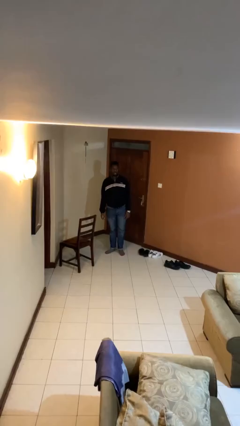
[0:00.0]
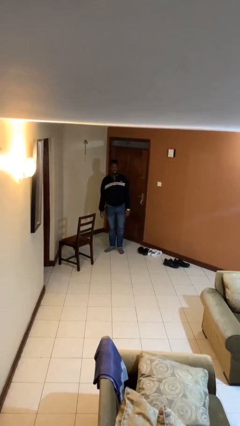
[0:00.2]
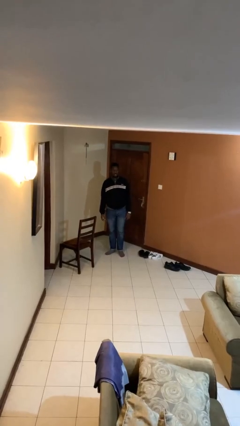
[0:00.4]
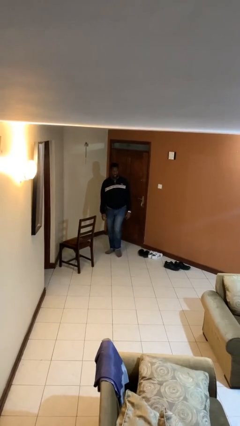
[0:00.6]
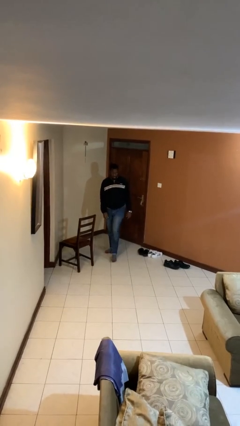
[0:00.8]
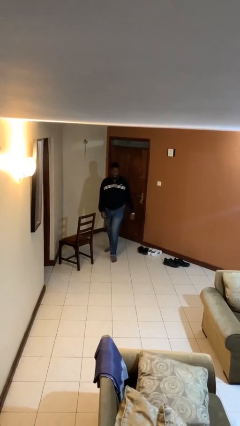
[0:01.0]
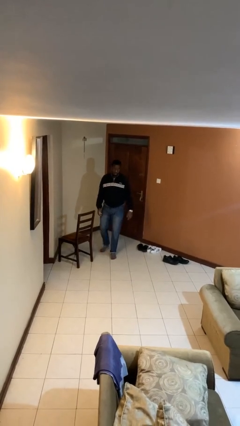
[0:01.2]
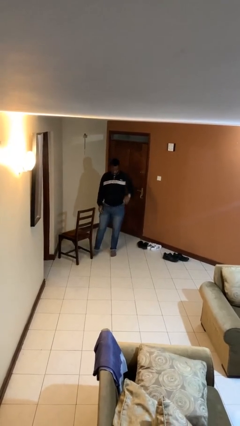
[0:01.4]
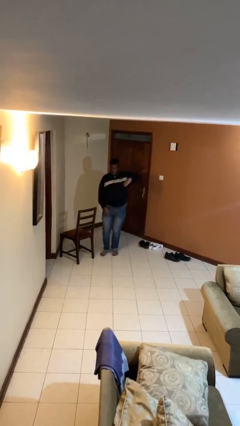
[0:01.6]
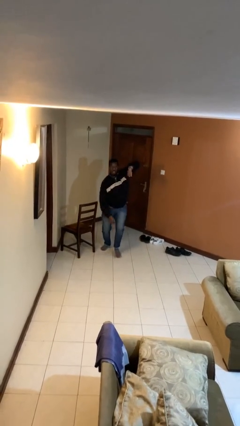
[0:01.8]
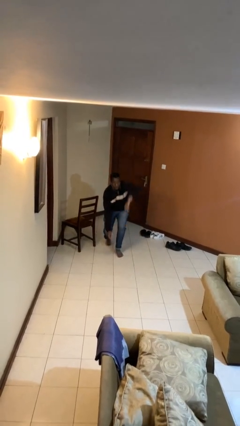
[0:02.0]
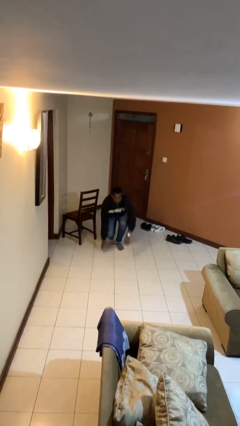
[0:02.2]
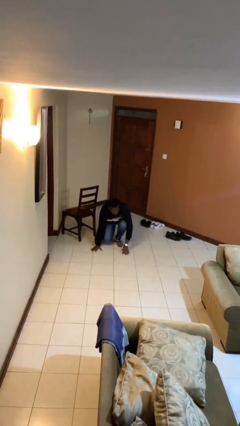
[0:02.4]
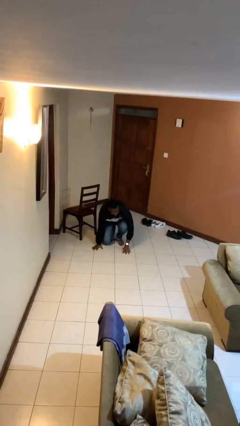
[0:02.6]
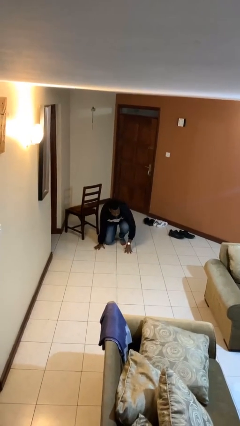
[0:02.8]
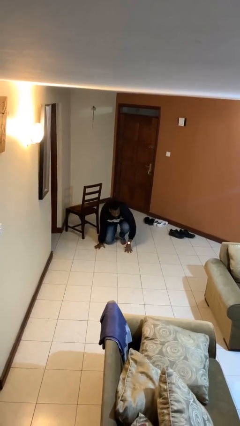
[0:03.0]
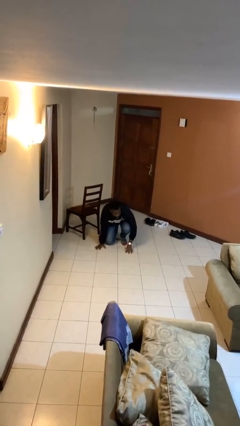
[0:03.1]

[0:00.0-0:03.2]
person trips on object on floor

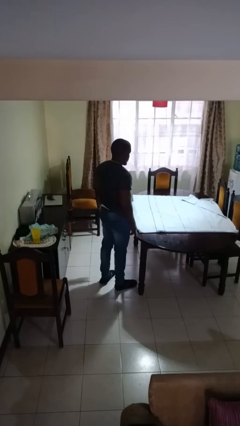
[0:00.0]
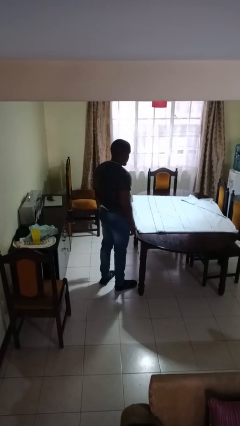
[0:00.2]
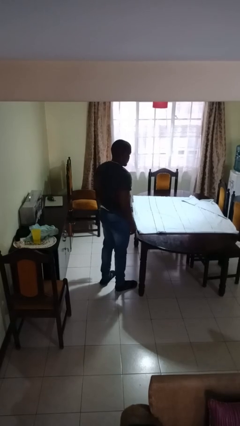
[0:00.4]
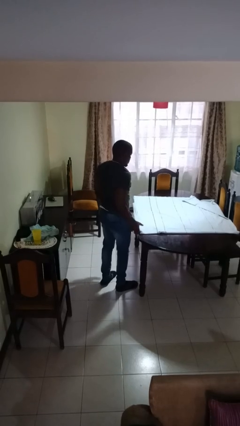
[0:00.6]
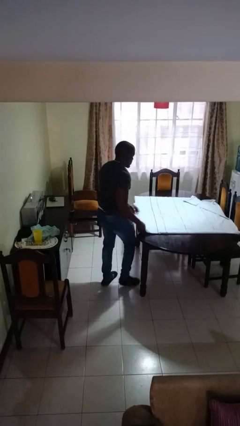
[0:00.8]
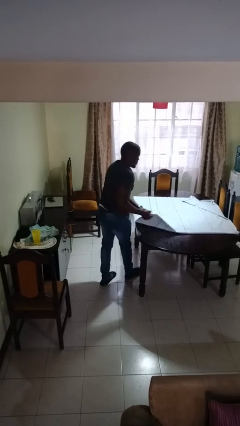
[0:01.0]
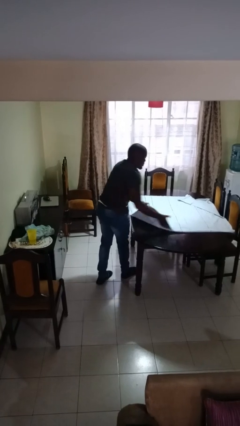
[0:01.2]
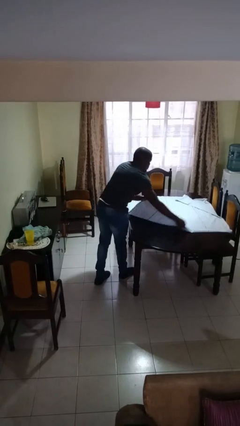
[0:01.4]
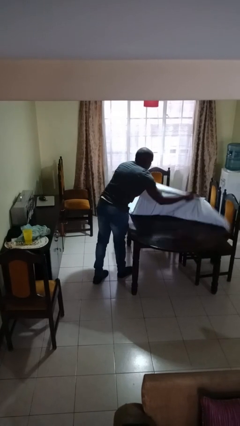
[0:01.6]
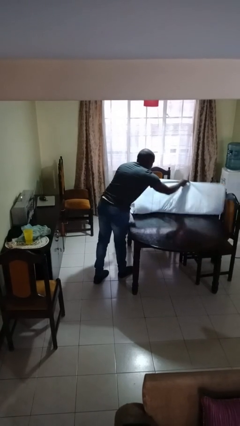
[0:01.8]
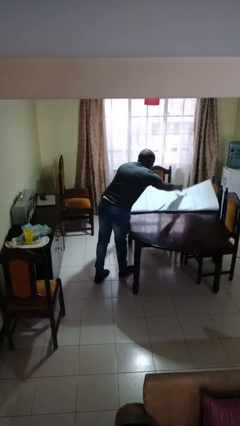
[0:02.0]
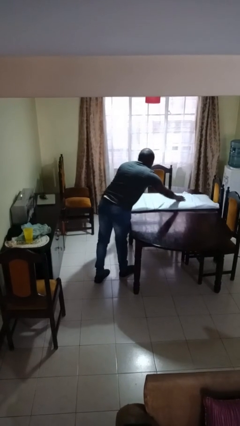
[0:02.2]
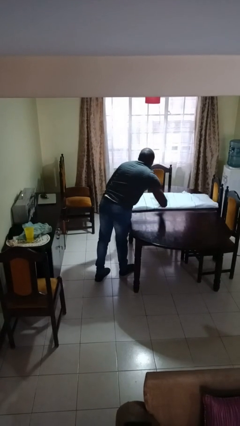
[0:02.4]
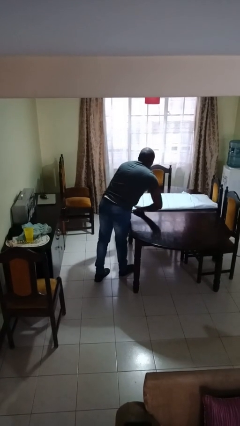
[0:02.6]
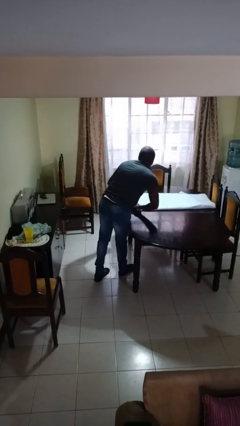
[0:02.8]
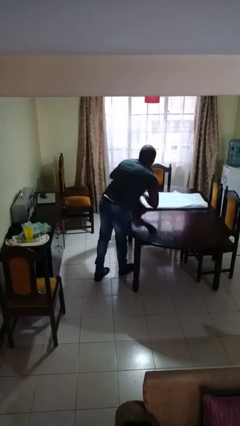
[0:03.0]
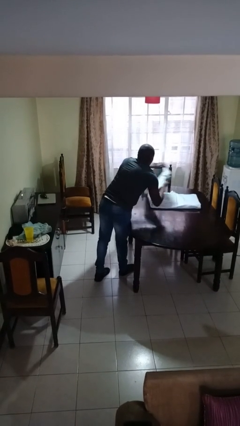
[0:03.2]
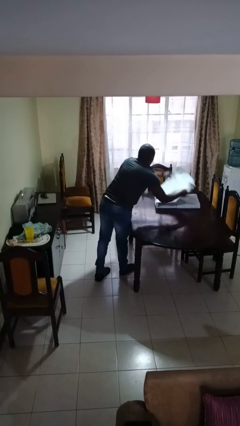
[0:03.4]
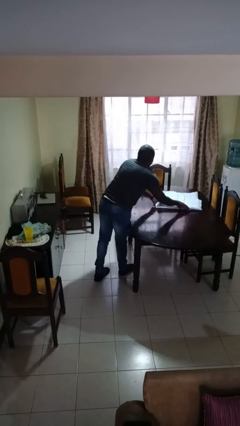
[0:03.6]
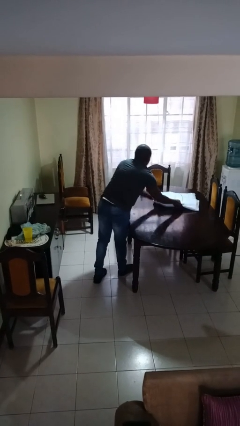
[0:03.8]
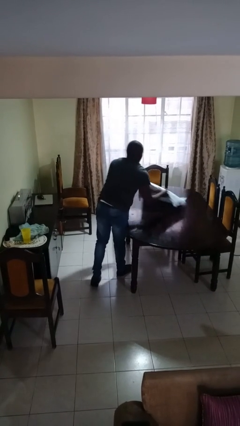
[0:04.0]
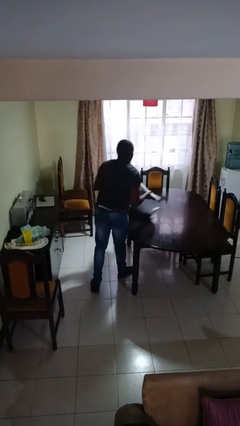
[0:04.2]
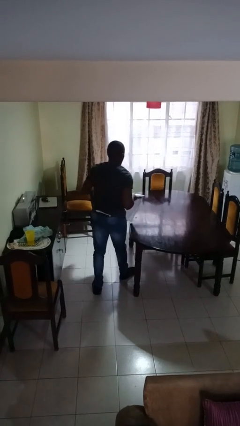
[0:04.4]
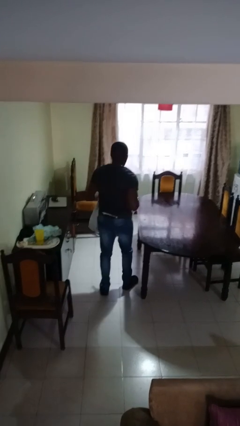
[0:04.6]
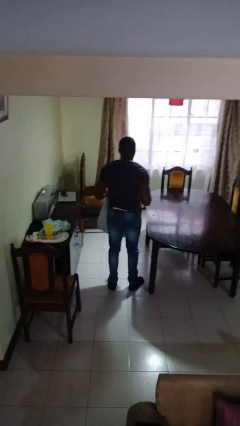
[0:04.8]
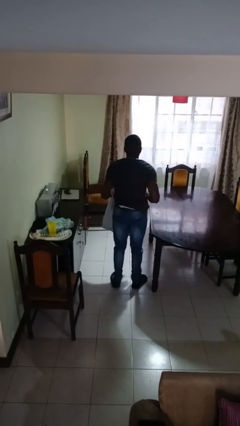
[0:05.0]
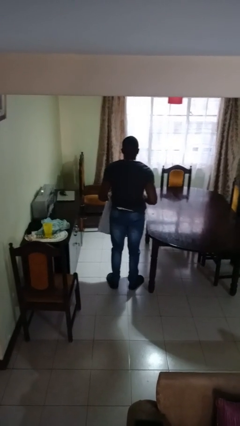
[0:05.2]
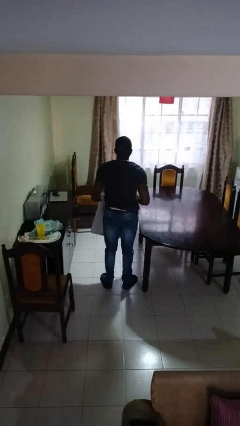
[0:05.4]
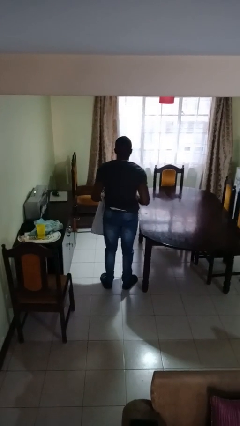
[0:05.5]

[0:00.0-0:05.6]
person folds tablecloth

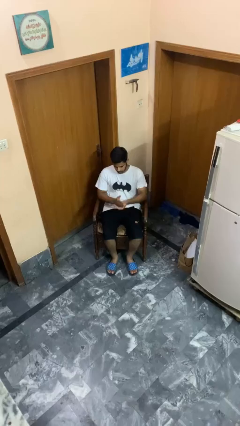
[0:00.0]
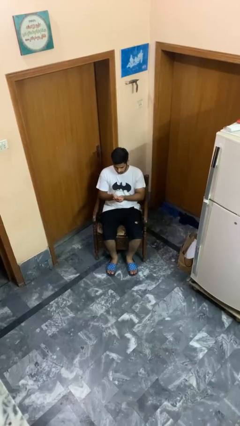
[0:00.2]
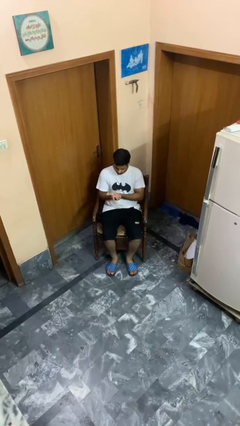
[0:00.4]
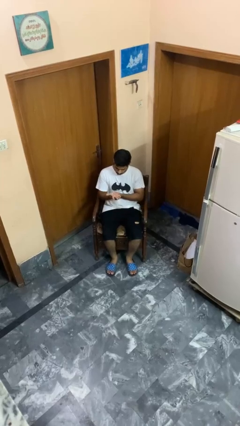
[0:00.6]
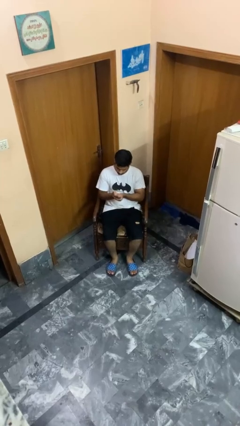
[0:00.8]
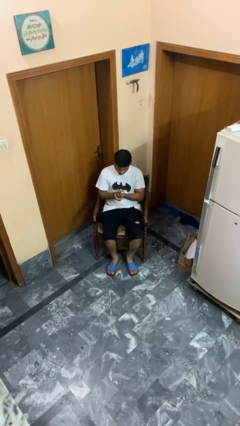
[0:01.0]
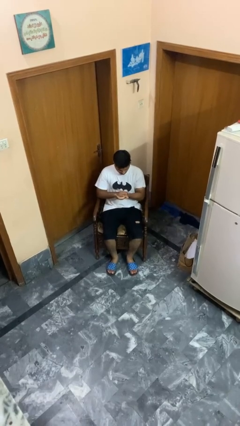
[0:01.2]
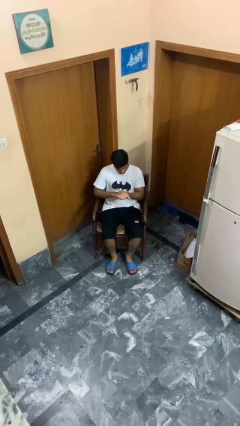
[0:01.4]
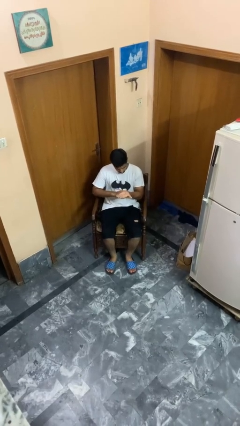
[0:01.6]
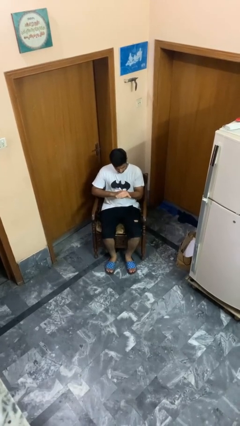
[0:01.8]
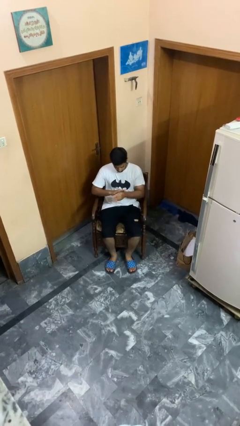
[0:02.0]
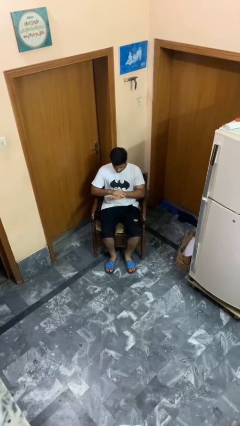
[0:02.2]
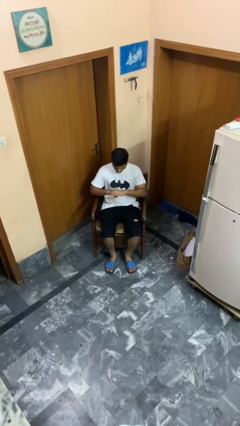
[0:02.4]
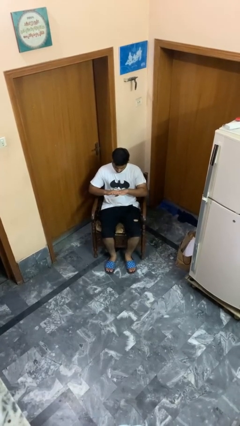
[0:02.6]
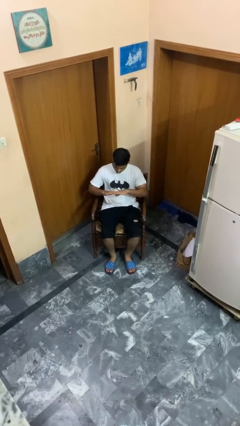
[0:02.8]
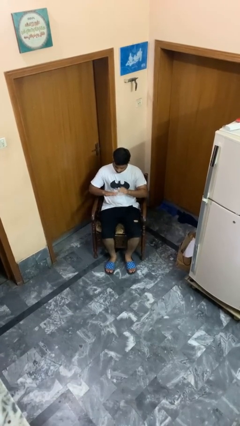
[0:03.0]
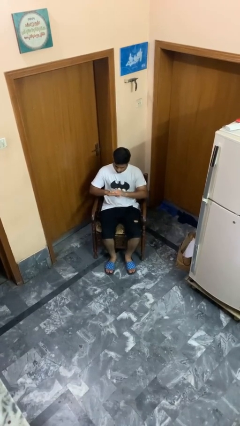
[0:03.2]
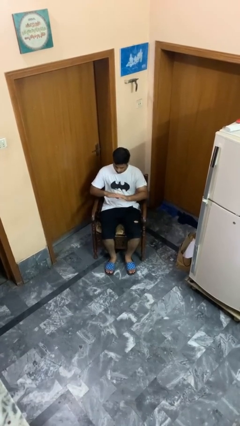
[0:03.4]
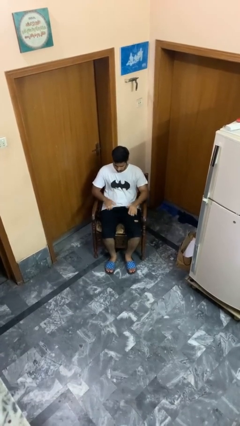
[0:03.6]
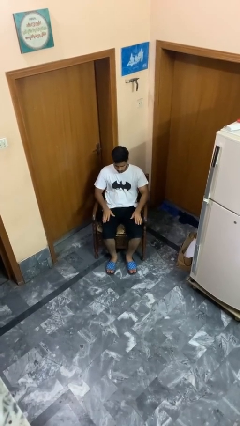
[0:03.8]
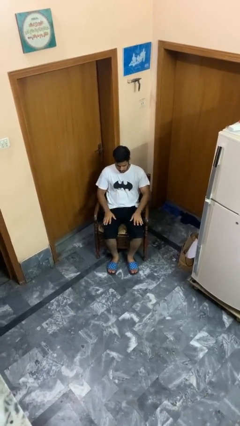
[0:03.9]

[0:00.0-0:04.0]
person looks at hands in lap

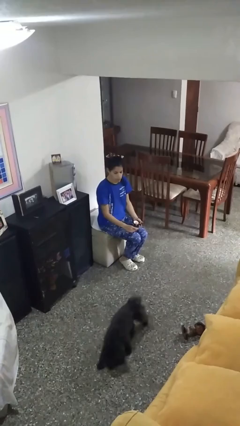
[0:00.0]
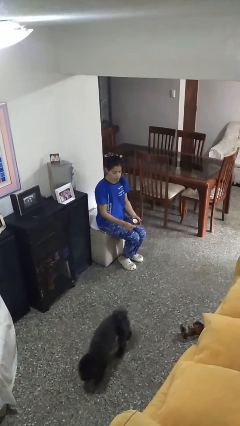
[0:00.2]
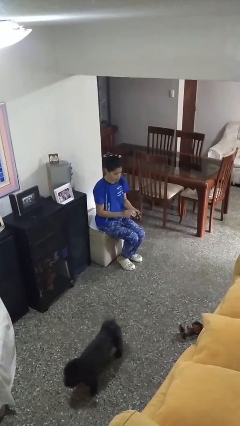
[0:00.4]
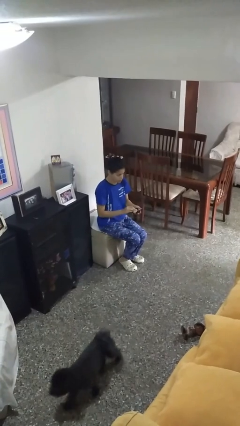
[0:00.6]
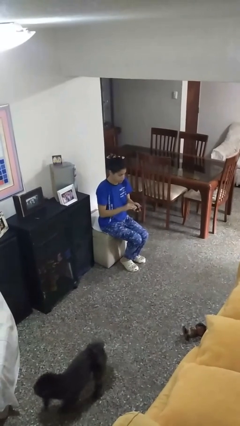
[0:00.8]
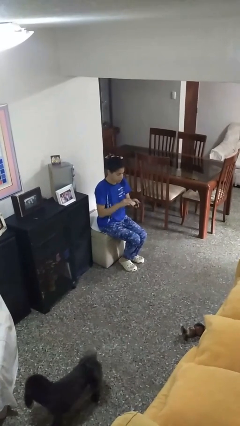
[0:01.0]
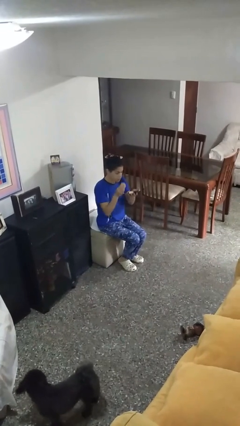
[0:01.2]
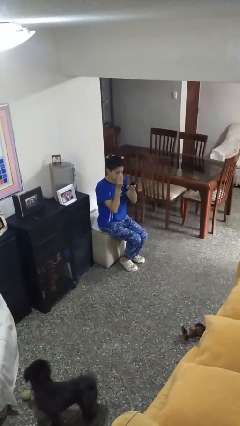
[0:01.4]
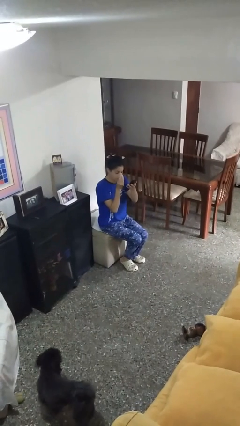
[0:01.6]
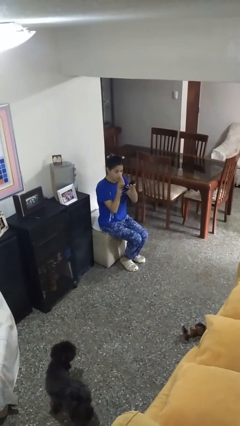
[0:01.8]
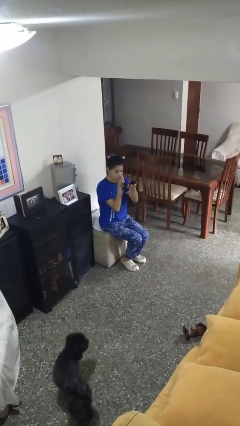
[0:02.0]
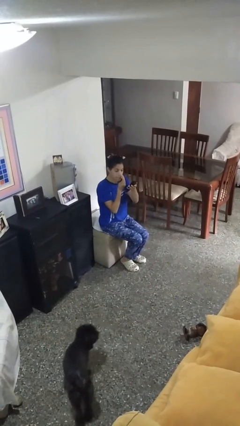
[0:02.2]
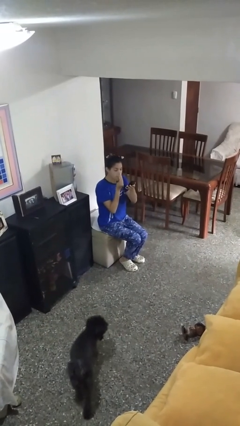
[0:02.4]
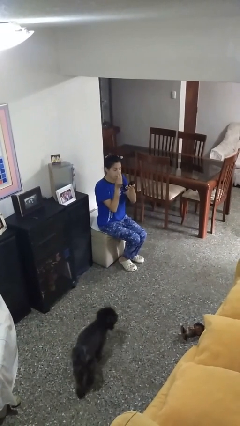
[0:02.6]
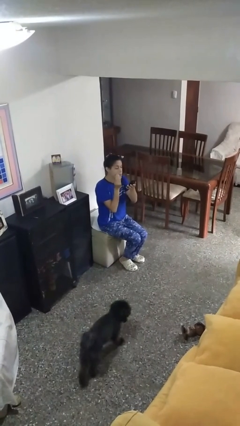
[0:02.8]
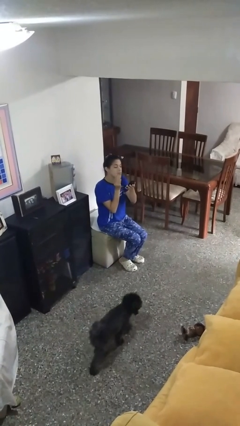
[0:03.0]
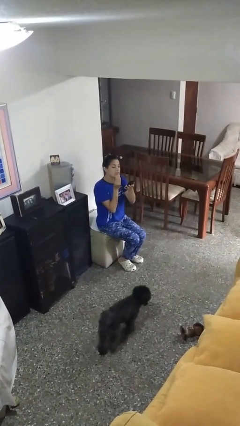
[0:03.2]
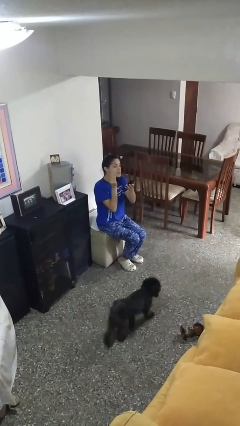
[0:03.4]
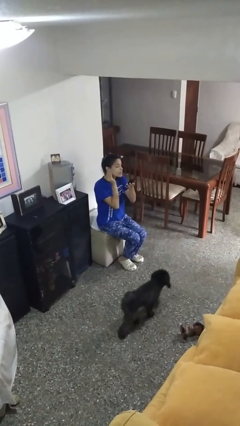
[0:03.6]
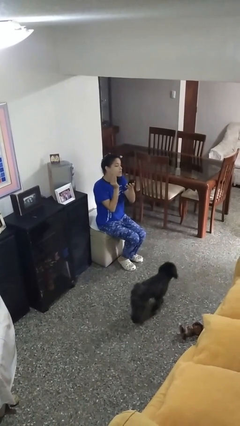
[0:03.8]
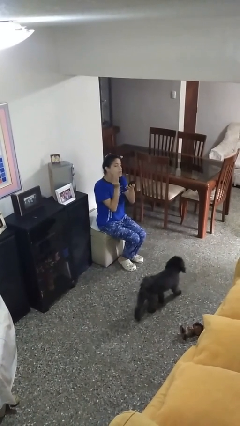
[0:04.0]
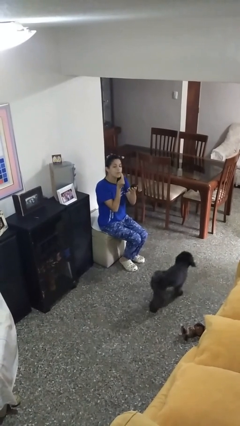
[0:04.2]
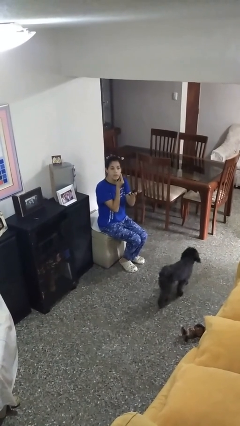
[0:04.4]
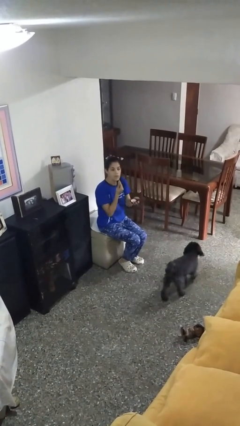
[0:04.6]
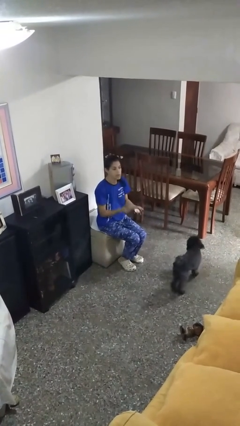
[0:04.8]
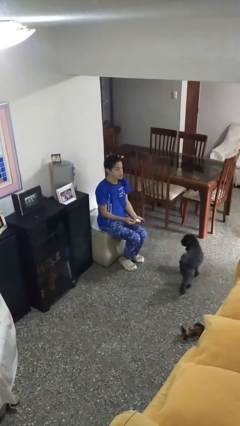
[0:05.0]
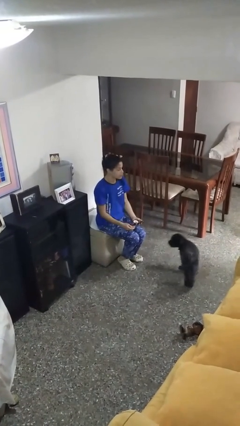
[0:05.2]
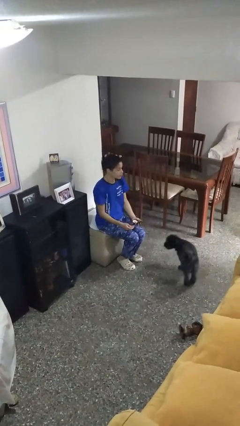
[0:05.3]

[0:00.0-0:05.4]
person applies foundation makeup
